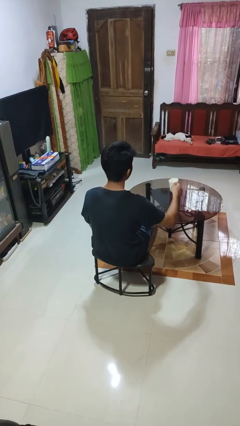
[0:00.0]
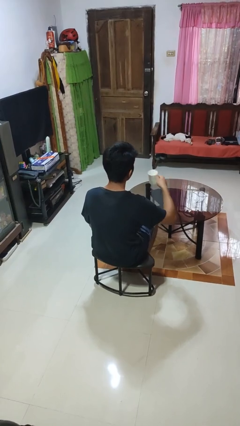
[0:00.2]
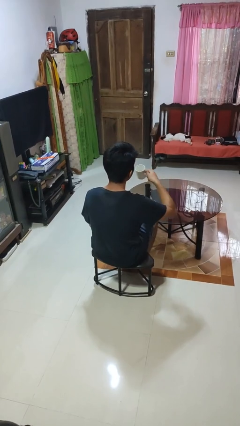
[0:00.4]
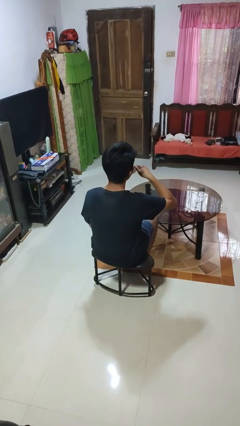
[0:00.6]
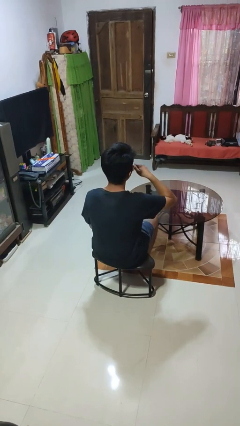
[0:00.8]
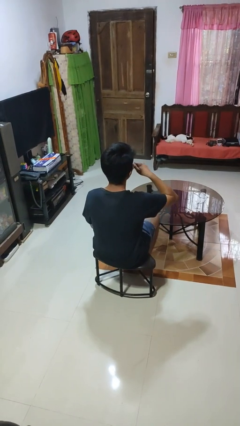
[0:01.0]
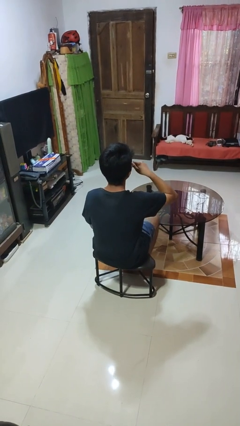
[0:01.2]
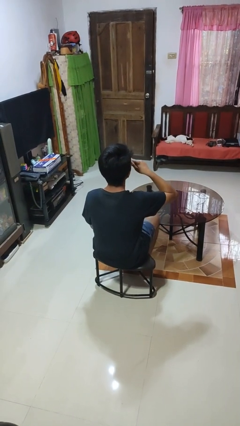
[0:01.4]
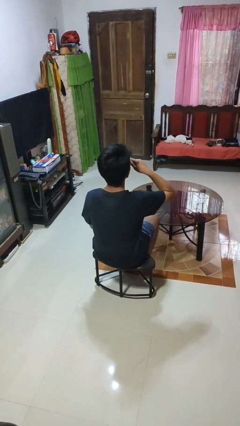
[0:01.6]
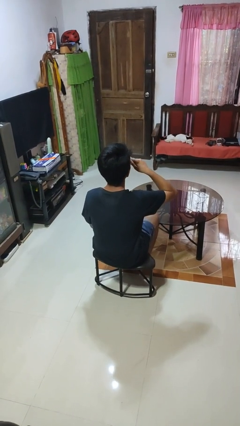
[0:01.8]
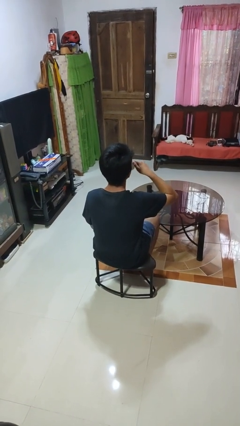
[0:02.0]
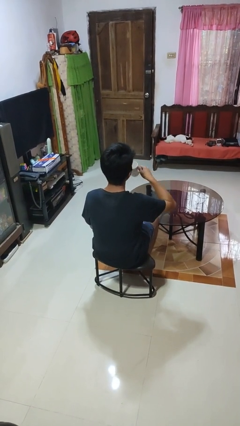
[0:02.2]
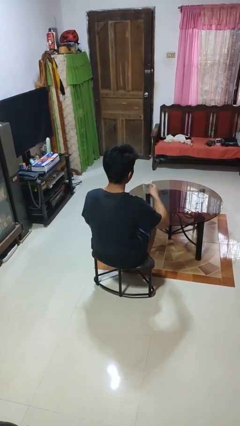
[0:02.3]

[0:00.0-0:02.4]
person drinks from mug

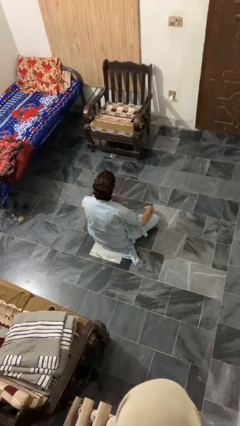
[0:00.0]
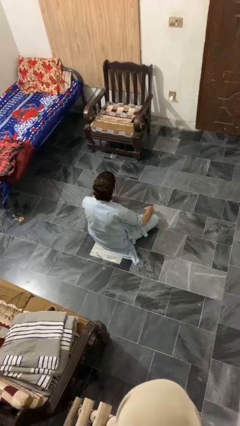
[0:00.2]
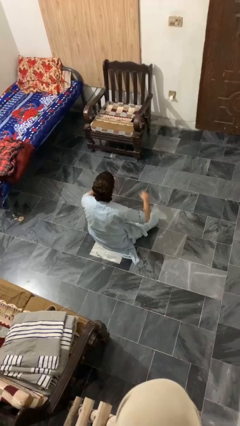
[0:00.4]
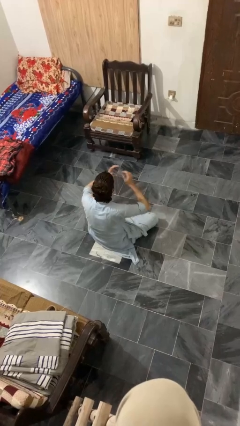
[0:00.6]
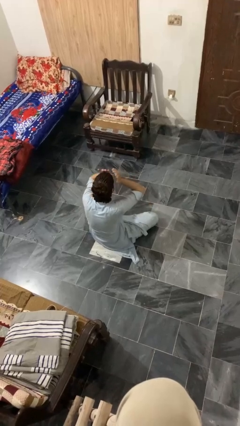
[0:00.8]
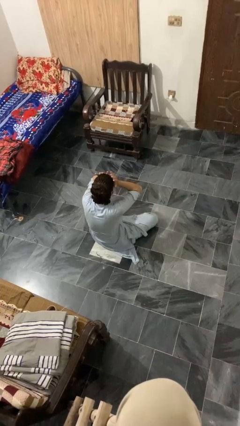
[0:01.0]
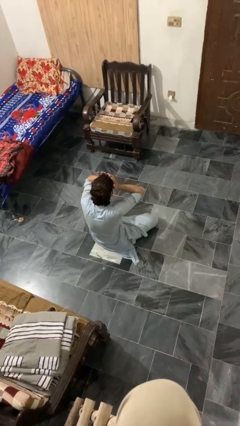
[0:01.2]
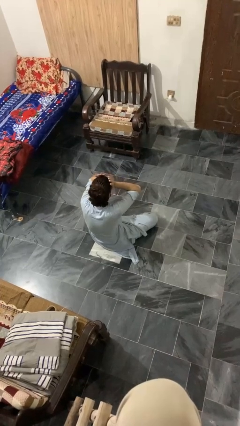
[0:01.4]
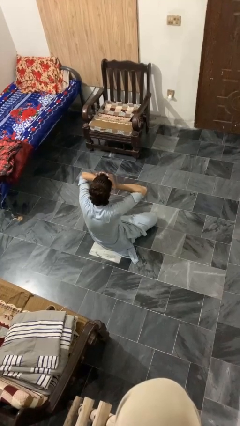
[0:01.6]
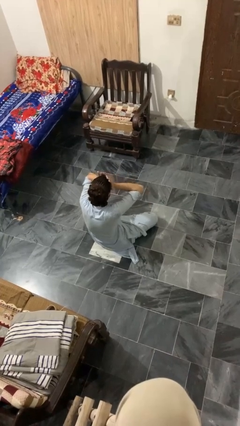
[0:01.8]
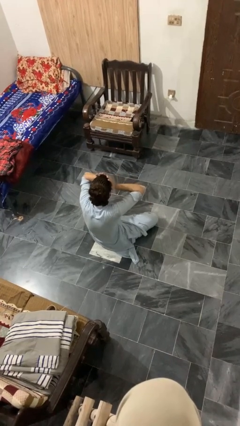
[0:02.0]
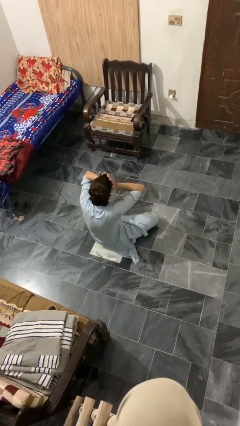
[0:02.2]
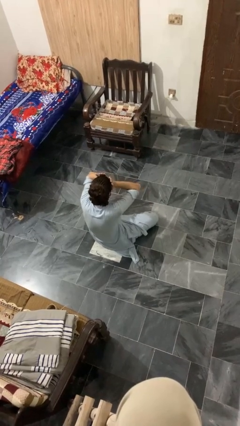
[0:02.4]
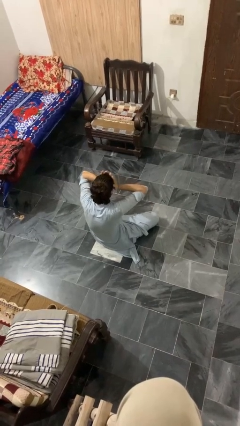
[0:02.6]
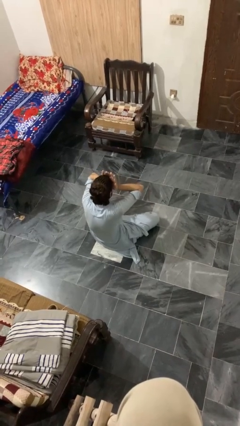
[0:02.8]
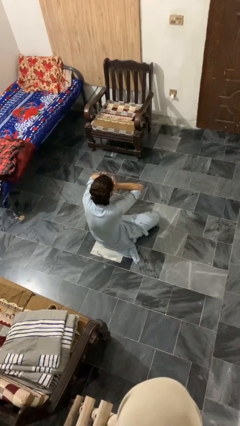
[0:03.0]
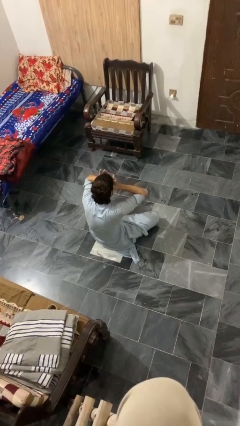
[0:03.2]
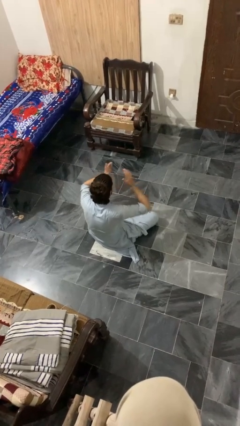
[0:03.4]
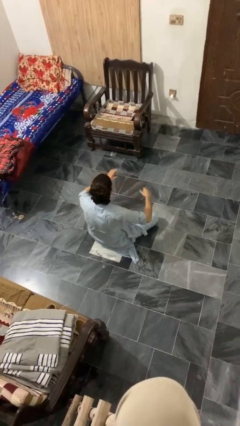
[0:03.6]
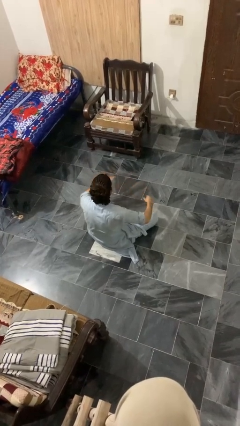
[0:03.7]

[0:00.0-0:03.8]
person rubs eyes

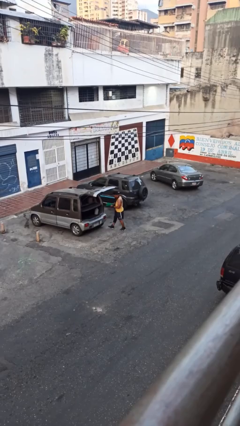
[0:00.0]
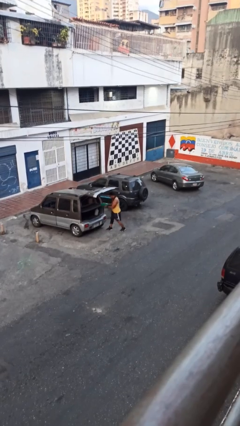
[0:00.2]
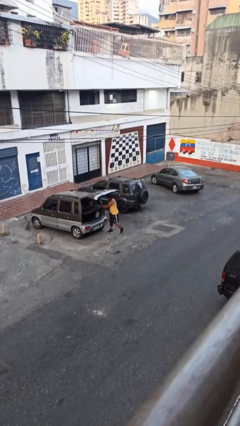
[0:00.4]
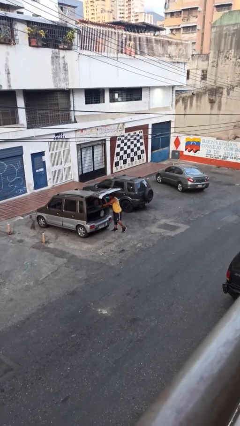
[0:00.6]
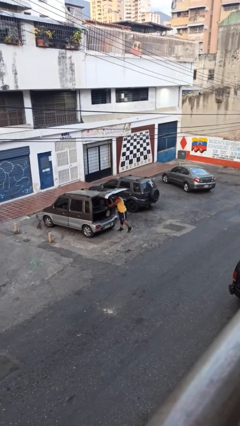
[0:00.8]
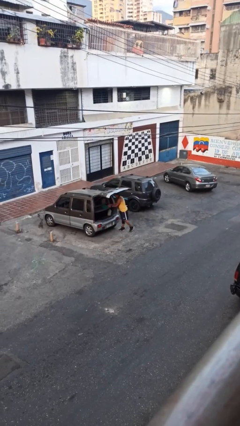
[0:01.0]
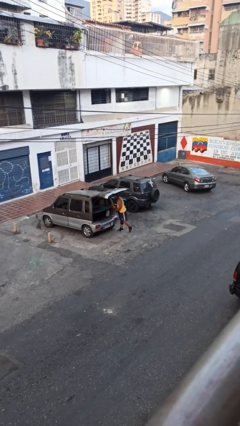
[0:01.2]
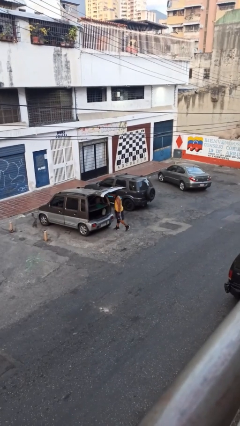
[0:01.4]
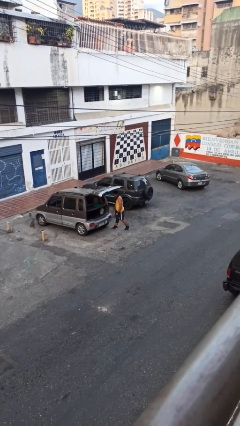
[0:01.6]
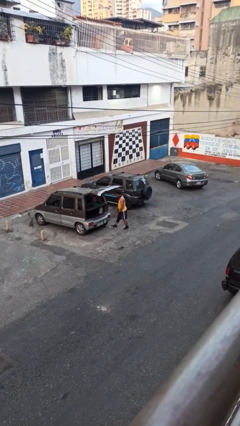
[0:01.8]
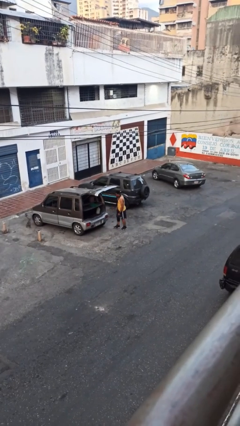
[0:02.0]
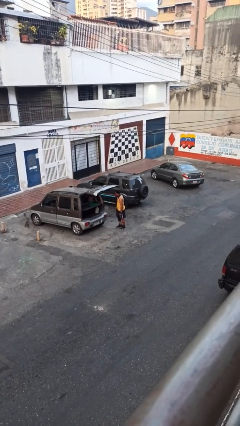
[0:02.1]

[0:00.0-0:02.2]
person loads car

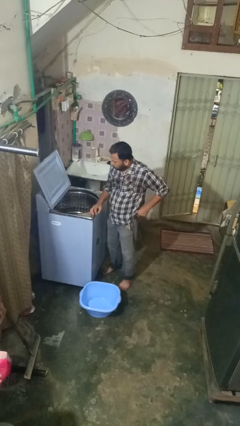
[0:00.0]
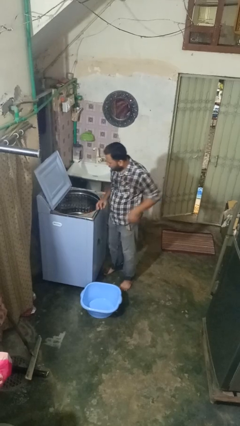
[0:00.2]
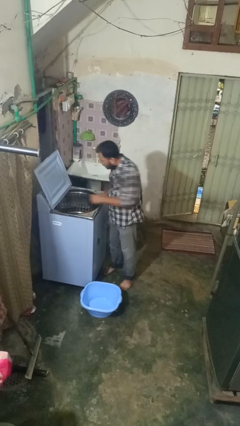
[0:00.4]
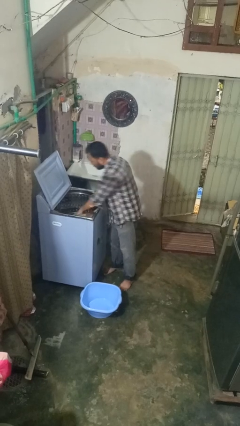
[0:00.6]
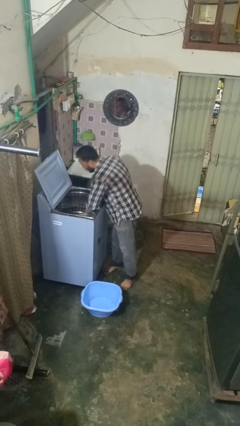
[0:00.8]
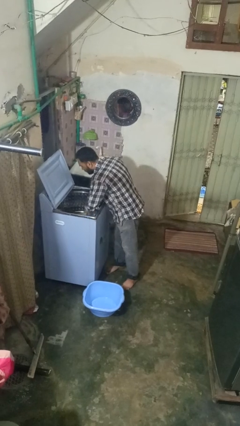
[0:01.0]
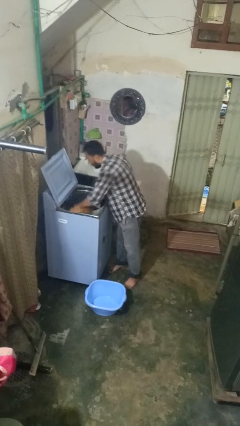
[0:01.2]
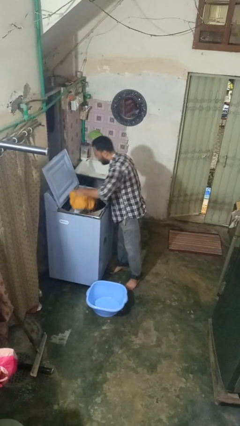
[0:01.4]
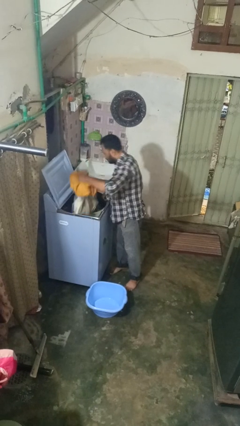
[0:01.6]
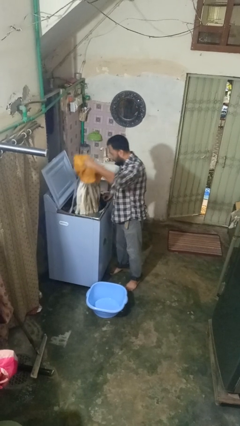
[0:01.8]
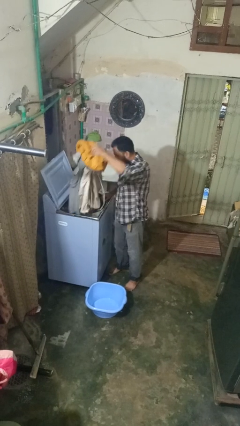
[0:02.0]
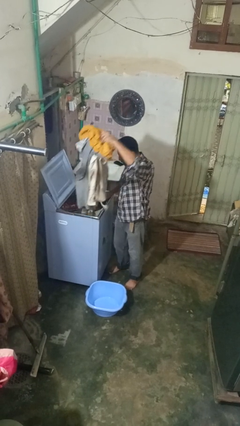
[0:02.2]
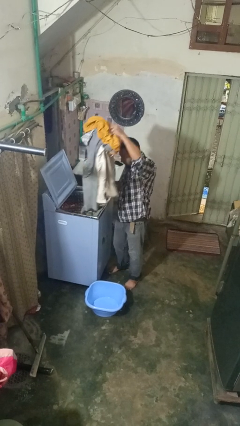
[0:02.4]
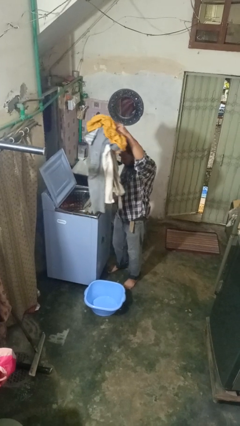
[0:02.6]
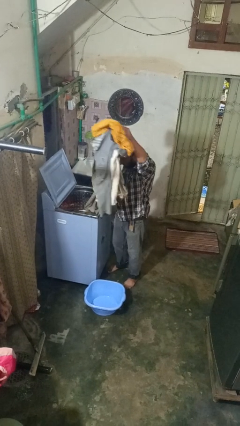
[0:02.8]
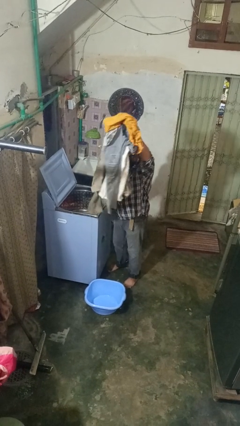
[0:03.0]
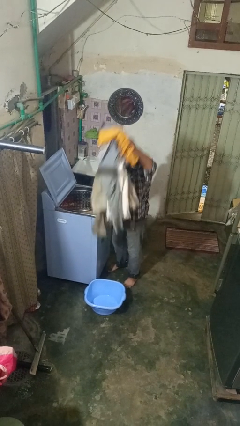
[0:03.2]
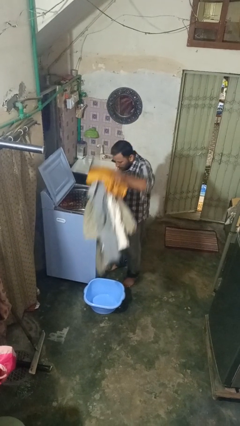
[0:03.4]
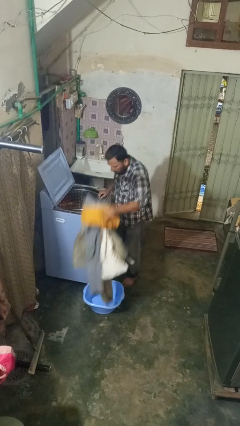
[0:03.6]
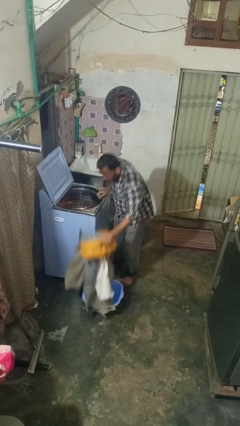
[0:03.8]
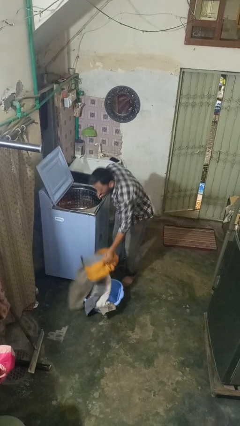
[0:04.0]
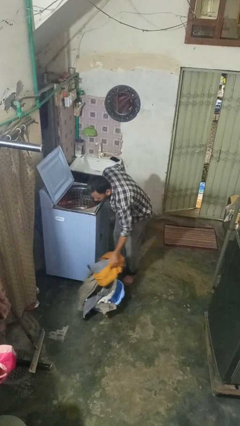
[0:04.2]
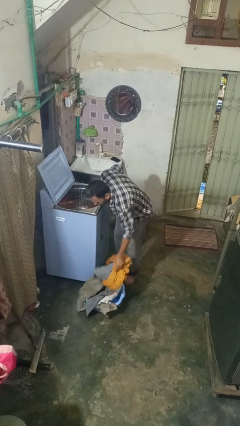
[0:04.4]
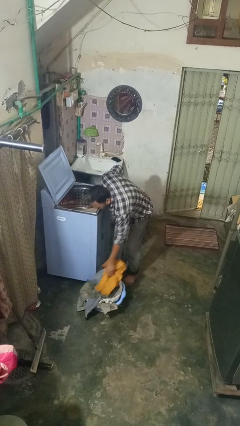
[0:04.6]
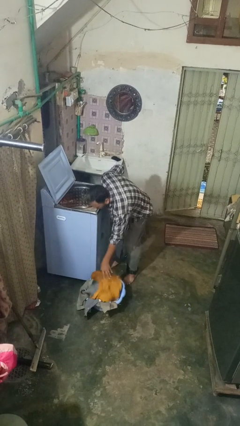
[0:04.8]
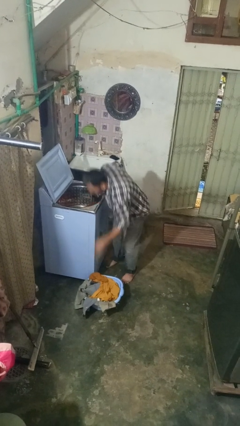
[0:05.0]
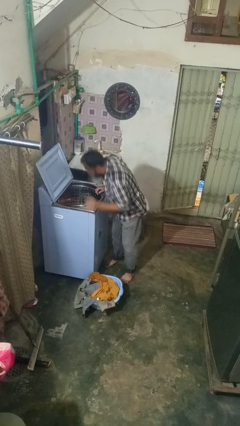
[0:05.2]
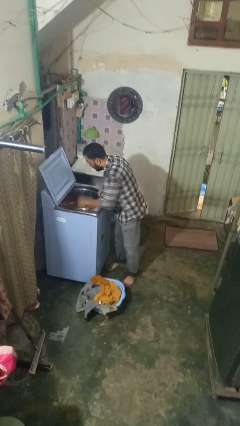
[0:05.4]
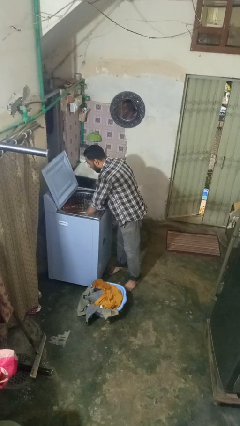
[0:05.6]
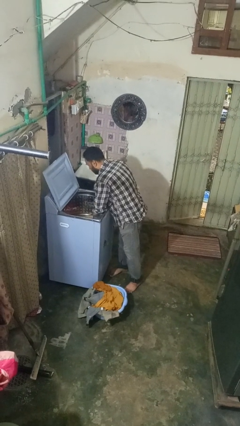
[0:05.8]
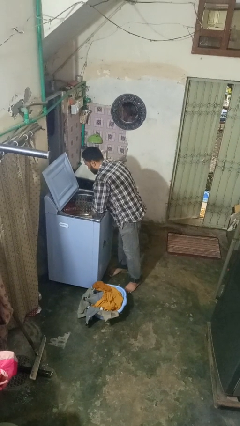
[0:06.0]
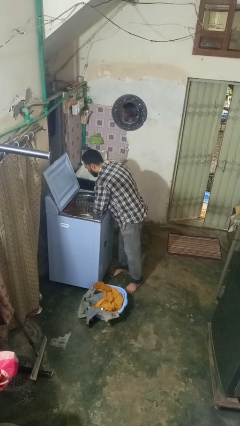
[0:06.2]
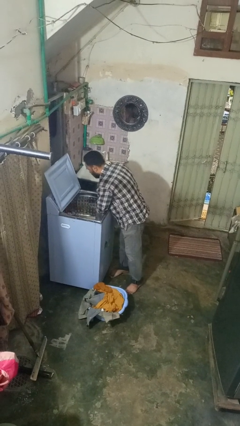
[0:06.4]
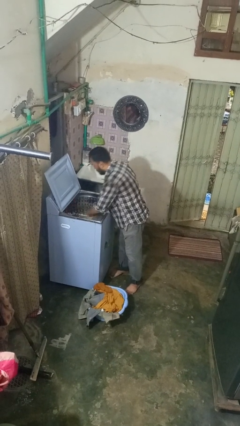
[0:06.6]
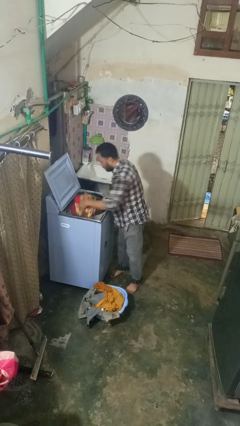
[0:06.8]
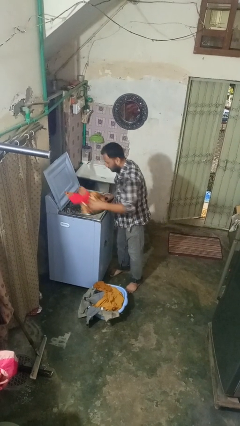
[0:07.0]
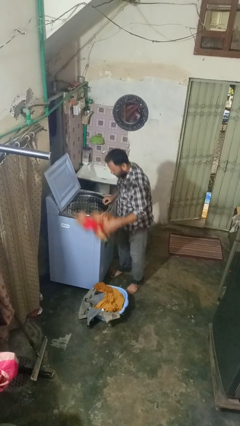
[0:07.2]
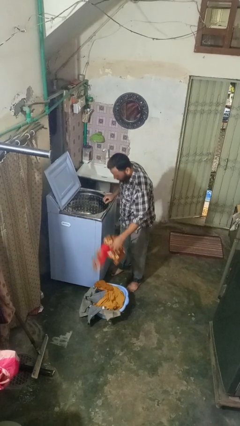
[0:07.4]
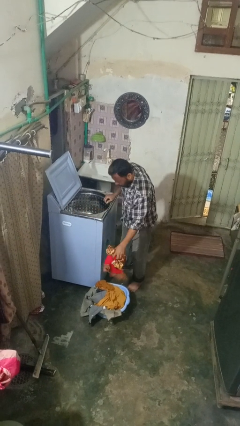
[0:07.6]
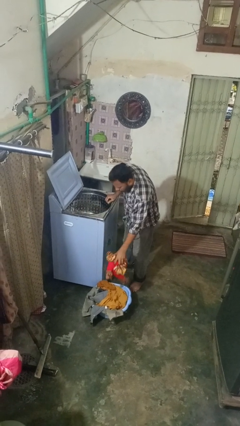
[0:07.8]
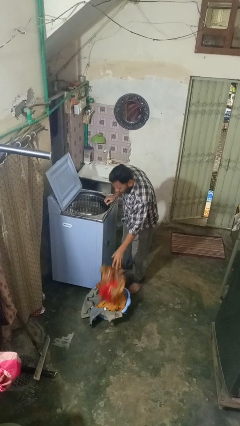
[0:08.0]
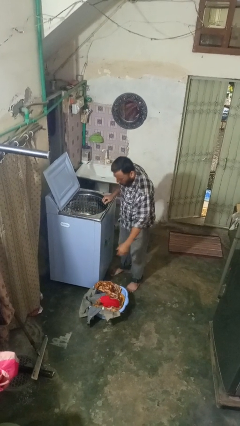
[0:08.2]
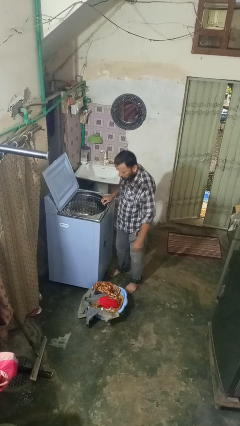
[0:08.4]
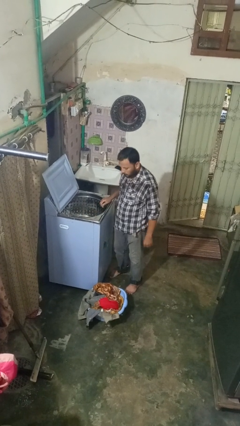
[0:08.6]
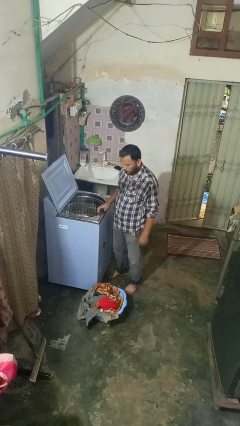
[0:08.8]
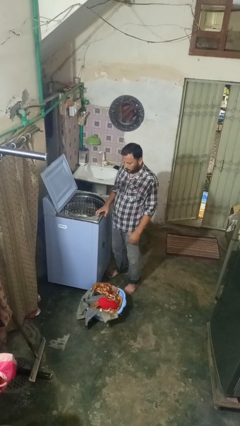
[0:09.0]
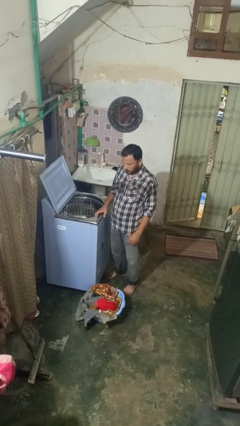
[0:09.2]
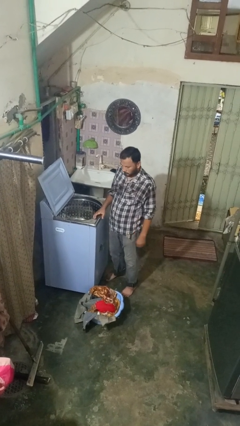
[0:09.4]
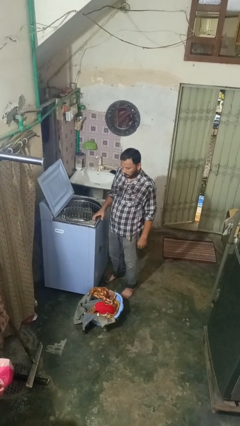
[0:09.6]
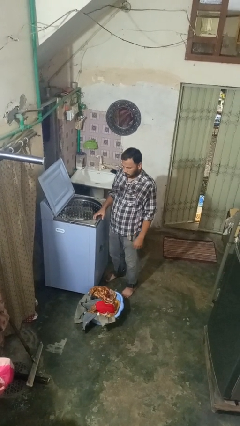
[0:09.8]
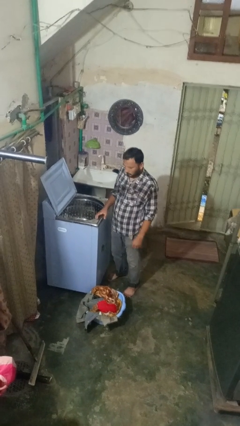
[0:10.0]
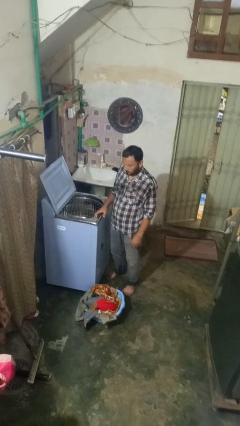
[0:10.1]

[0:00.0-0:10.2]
person unloads clotheswasher
